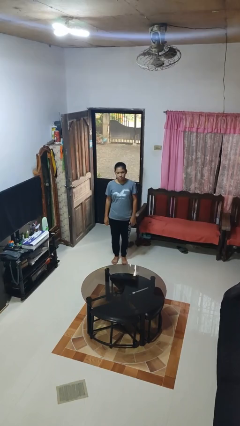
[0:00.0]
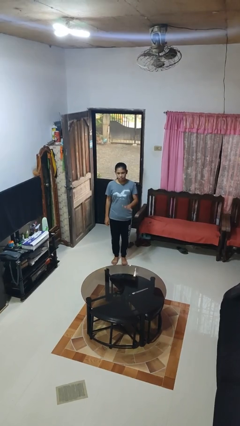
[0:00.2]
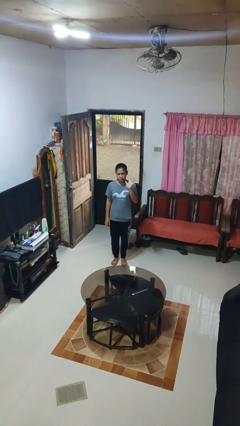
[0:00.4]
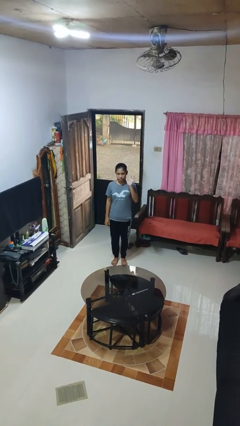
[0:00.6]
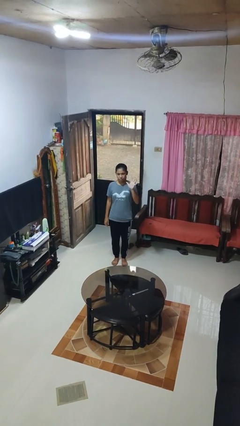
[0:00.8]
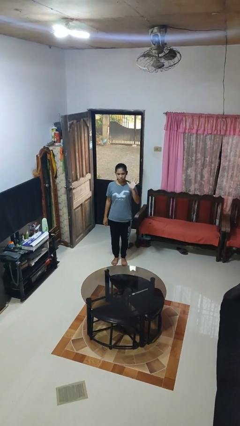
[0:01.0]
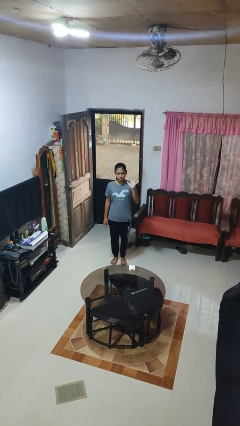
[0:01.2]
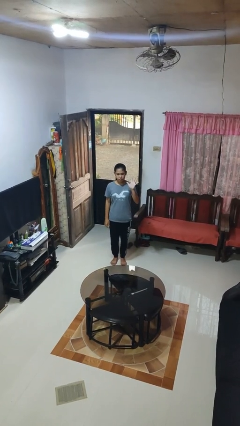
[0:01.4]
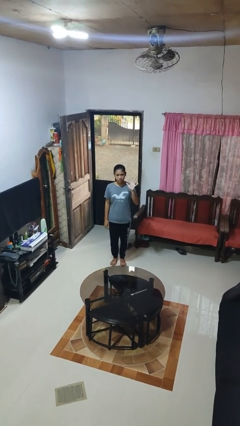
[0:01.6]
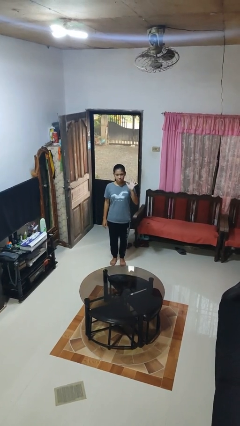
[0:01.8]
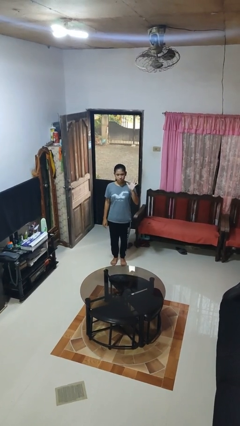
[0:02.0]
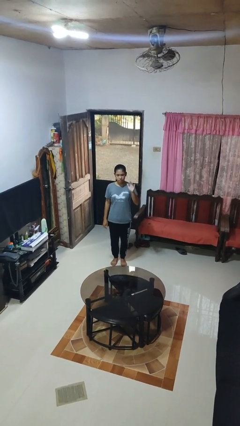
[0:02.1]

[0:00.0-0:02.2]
person gestures number five

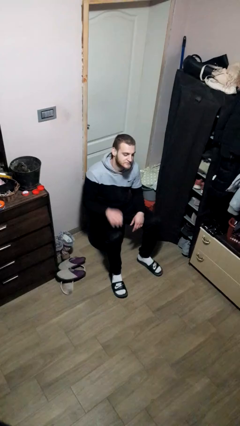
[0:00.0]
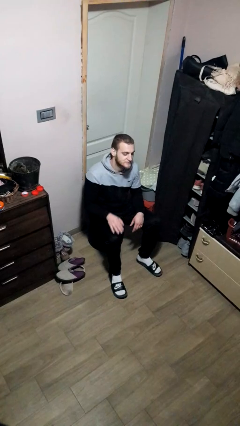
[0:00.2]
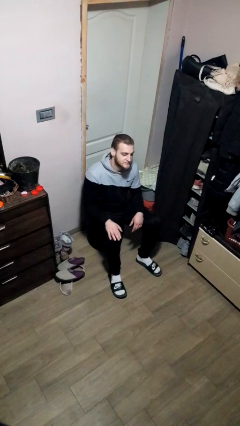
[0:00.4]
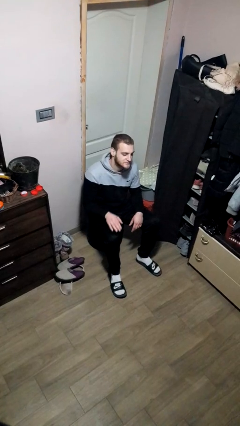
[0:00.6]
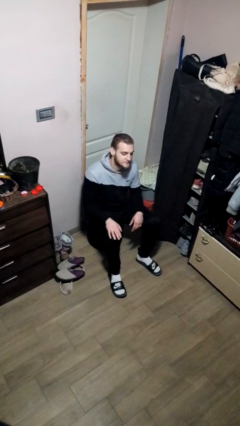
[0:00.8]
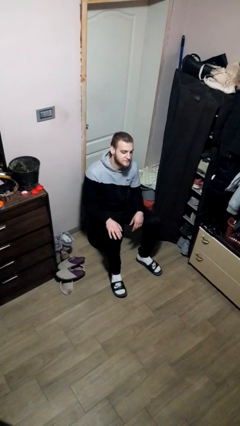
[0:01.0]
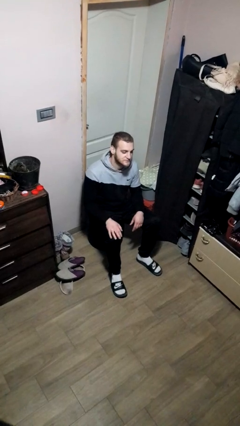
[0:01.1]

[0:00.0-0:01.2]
person slaps hands on thighs

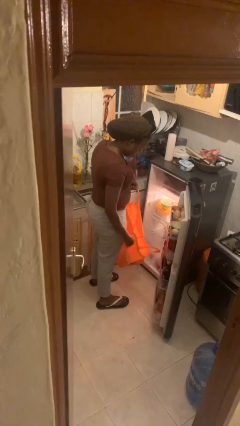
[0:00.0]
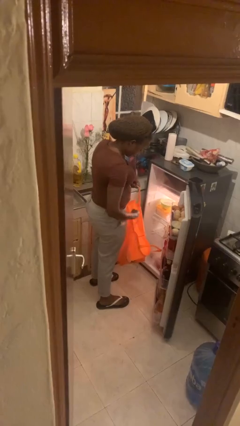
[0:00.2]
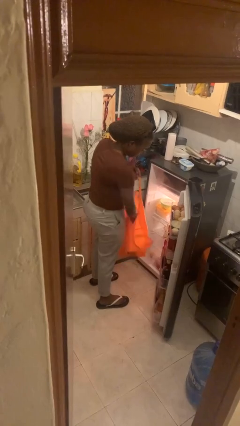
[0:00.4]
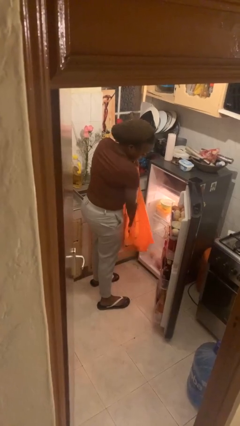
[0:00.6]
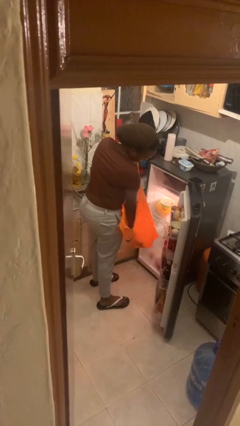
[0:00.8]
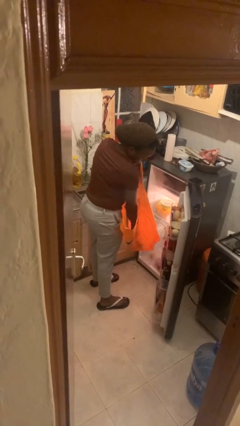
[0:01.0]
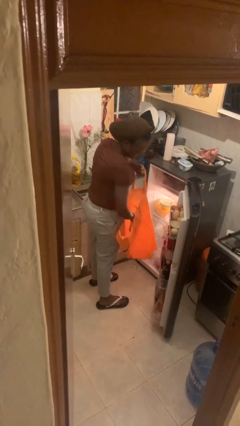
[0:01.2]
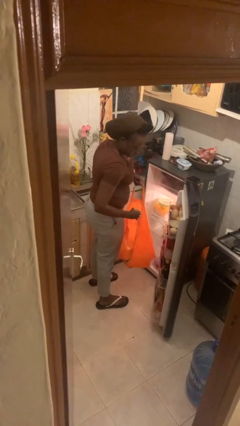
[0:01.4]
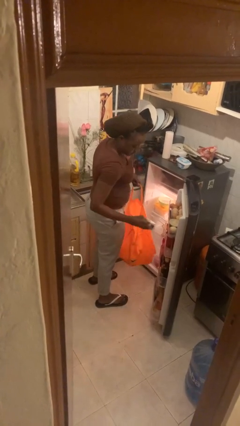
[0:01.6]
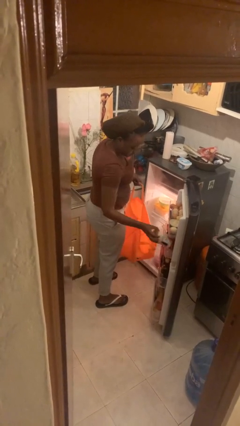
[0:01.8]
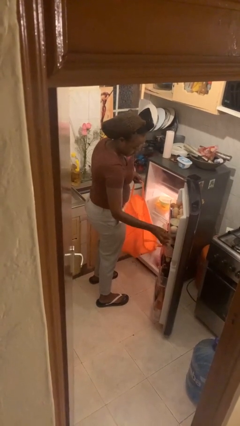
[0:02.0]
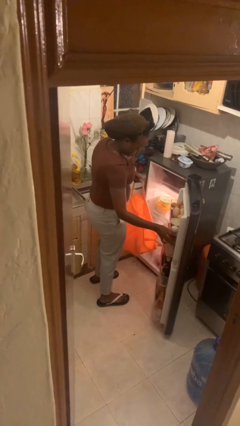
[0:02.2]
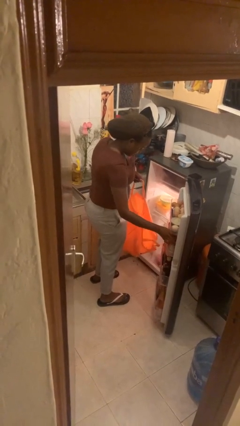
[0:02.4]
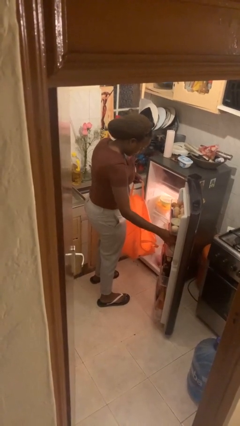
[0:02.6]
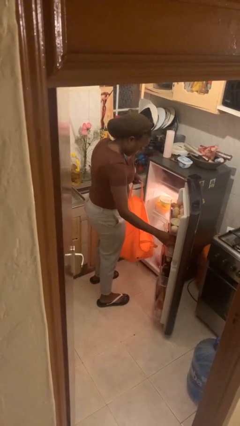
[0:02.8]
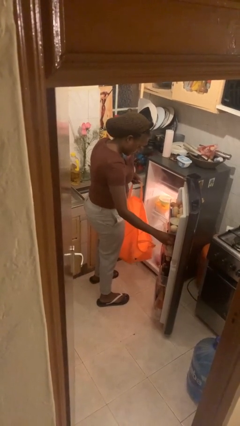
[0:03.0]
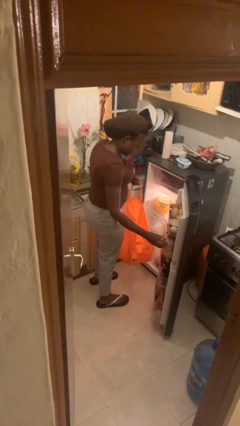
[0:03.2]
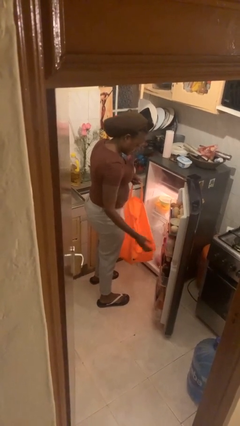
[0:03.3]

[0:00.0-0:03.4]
person loads groceries into refrigerator

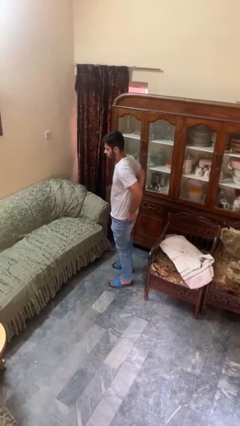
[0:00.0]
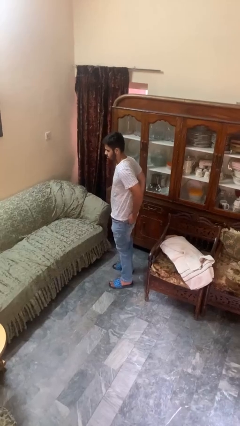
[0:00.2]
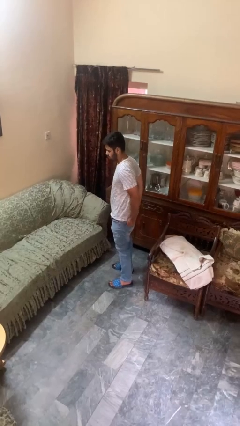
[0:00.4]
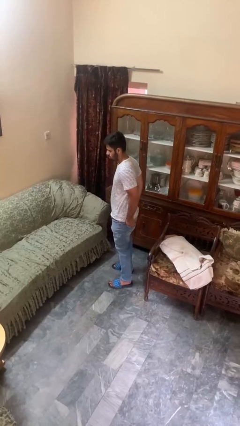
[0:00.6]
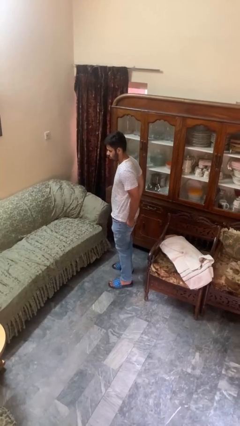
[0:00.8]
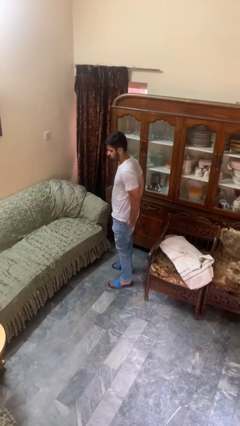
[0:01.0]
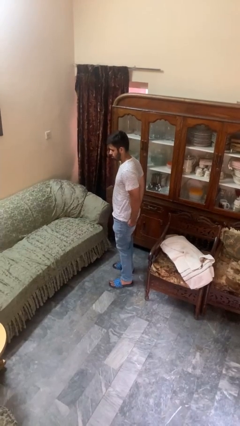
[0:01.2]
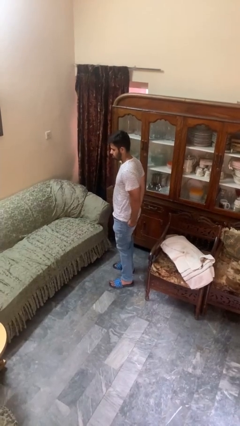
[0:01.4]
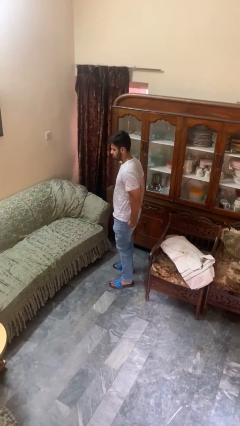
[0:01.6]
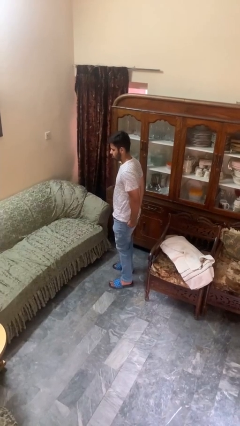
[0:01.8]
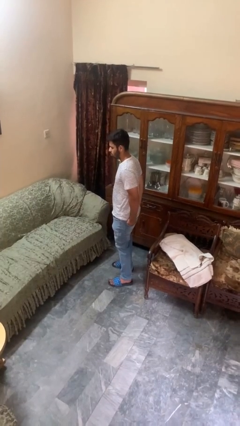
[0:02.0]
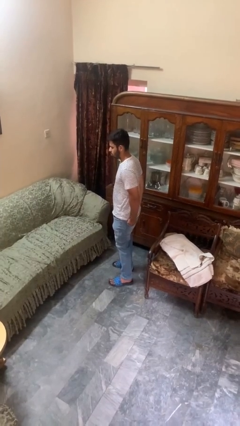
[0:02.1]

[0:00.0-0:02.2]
person puts hands in back pockets

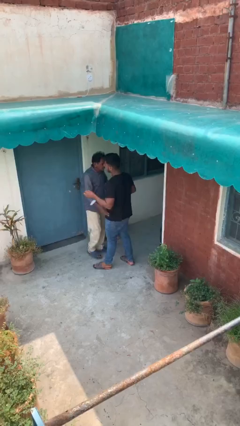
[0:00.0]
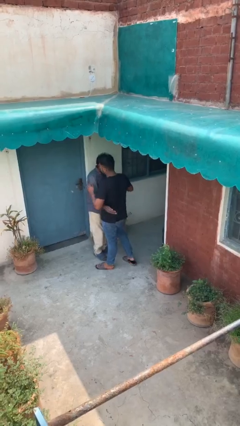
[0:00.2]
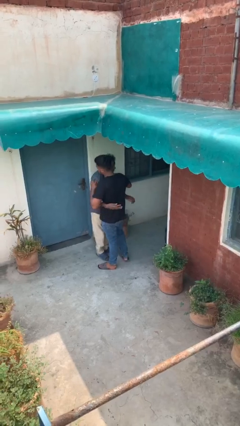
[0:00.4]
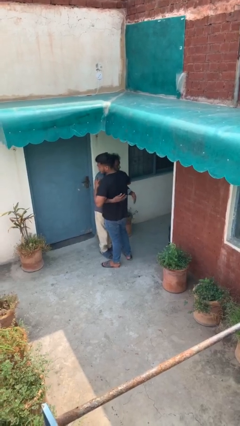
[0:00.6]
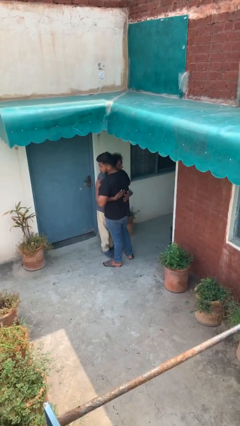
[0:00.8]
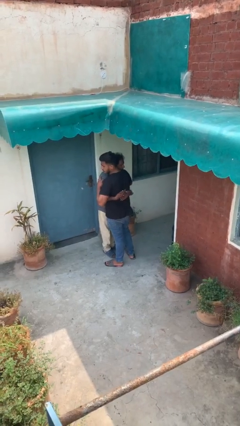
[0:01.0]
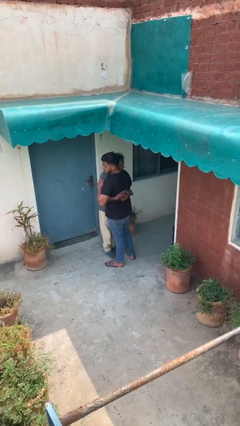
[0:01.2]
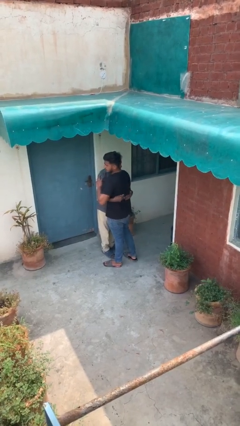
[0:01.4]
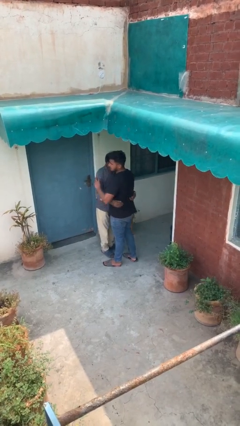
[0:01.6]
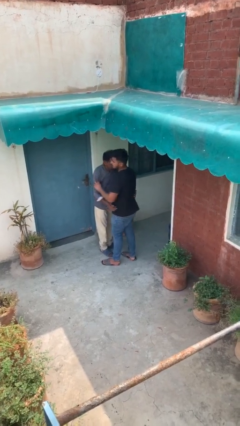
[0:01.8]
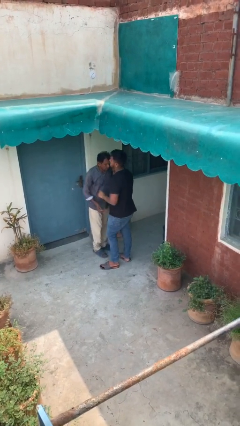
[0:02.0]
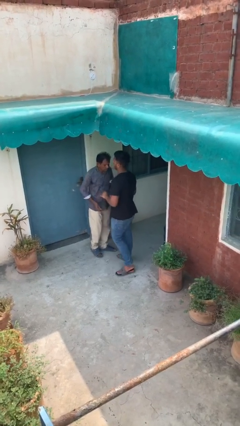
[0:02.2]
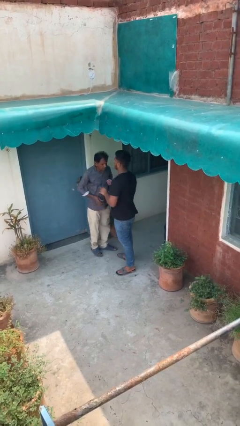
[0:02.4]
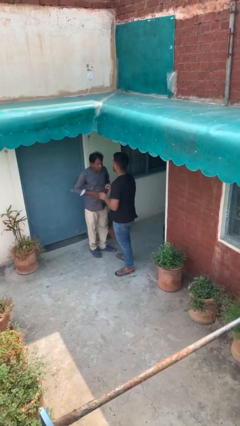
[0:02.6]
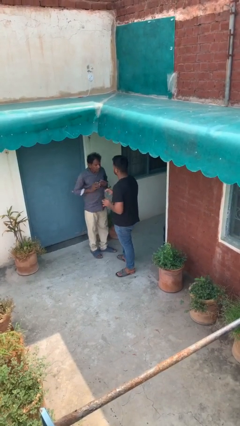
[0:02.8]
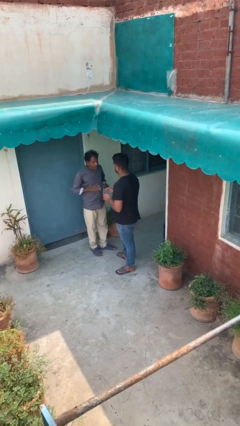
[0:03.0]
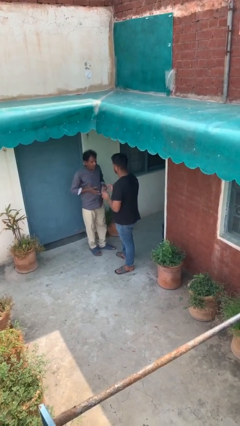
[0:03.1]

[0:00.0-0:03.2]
person embraces person

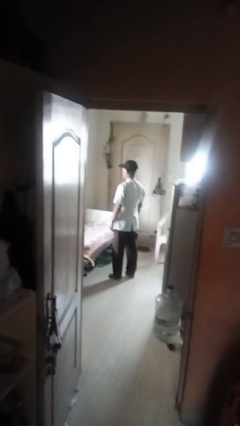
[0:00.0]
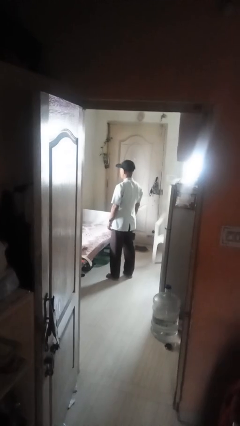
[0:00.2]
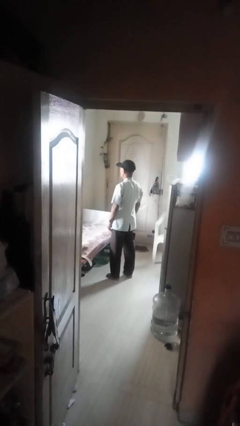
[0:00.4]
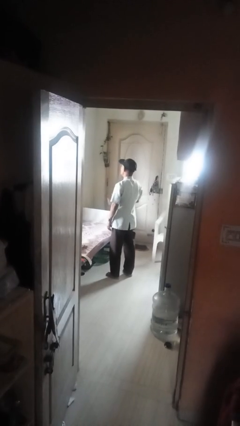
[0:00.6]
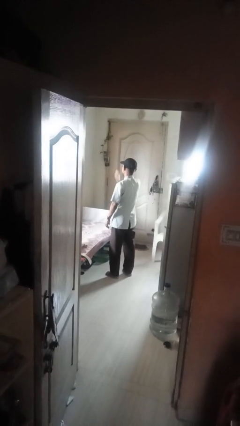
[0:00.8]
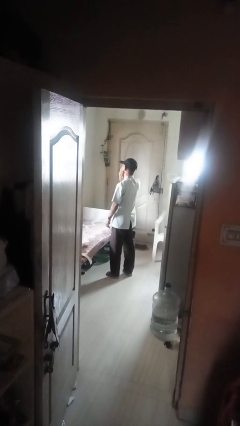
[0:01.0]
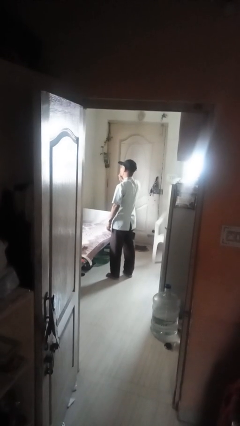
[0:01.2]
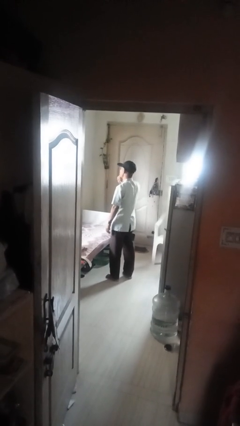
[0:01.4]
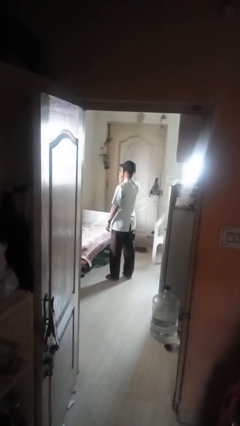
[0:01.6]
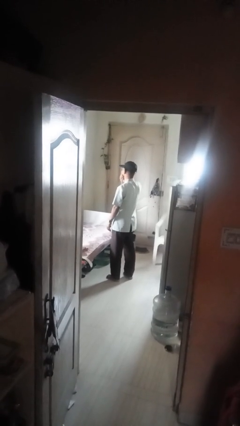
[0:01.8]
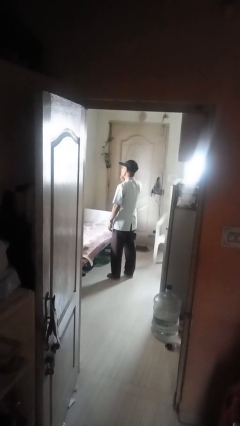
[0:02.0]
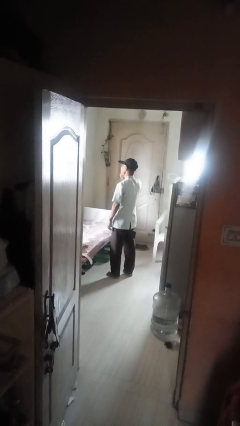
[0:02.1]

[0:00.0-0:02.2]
person strokes chin

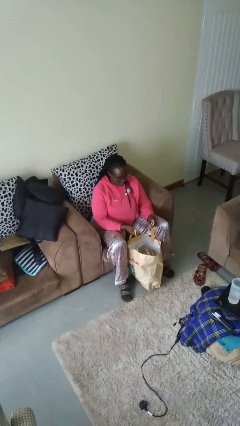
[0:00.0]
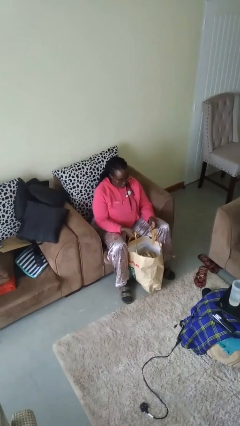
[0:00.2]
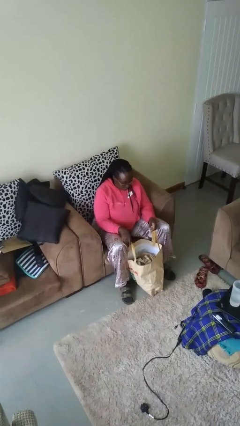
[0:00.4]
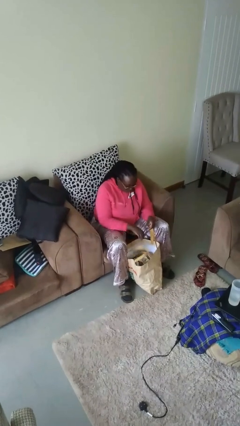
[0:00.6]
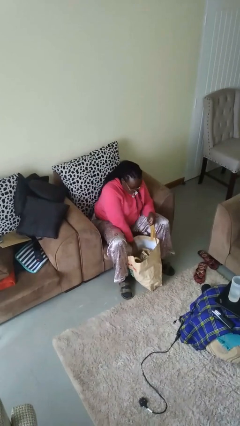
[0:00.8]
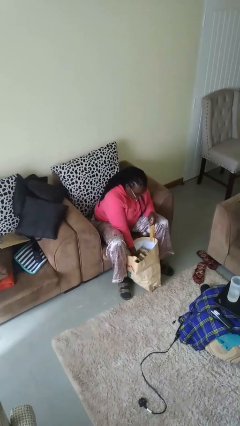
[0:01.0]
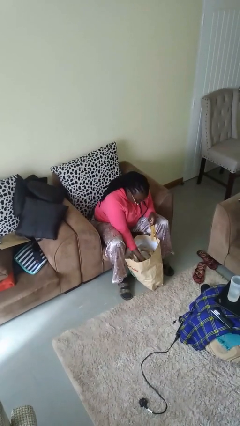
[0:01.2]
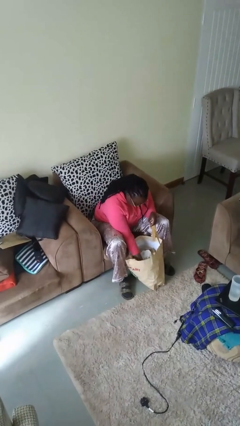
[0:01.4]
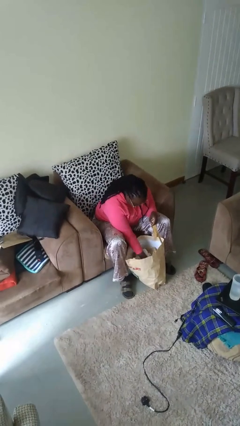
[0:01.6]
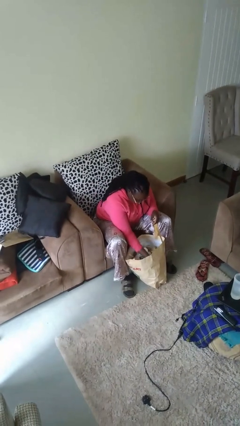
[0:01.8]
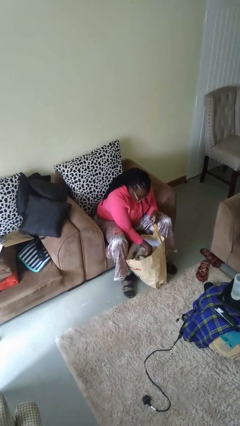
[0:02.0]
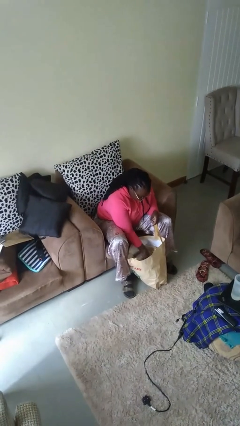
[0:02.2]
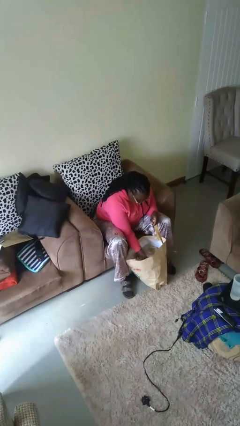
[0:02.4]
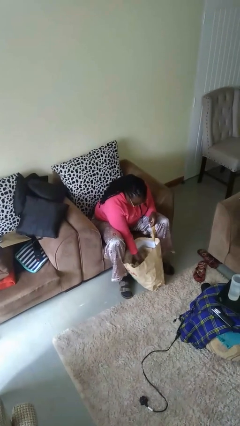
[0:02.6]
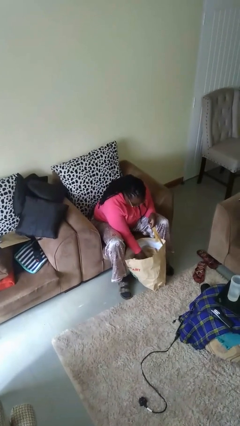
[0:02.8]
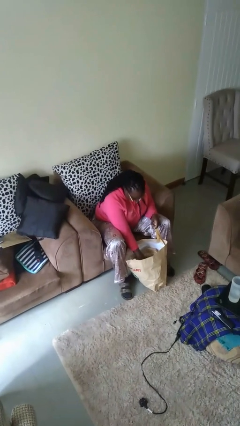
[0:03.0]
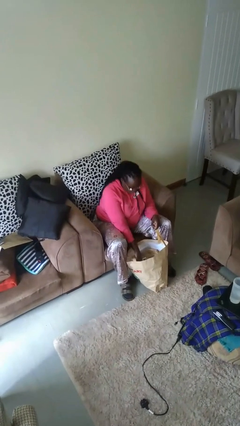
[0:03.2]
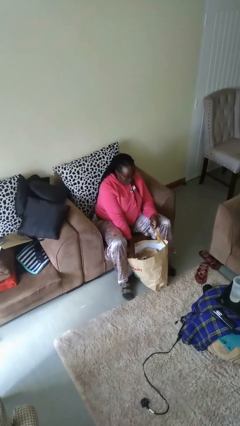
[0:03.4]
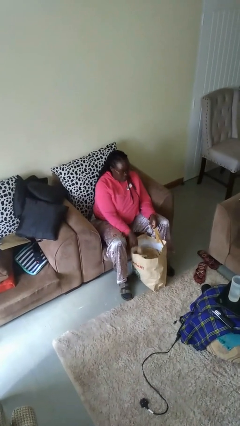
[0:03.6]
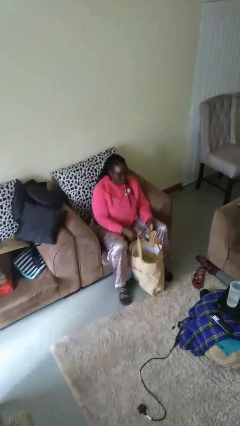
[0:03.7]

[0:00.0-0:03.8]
person searches in bag
